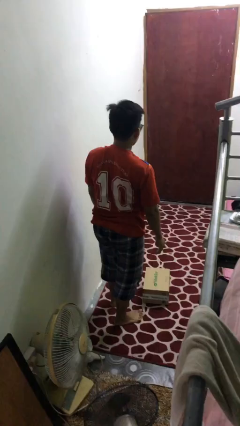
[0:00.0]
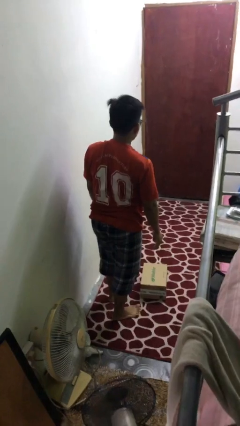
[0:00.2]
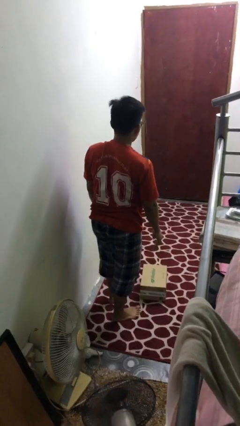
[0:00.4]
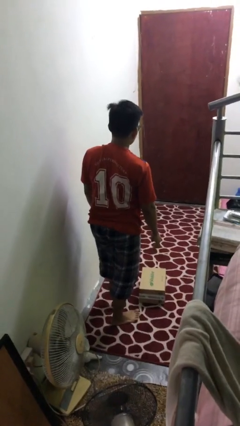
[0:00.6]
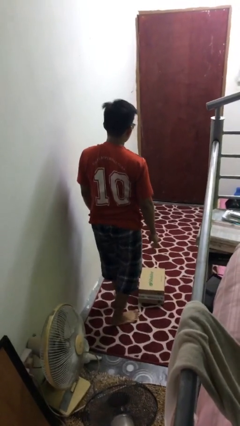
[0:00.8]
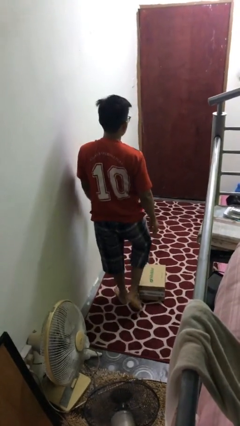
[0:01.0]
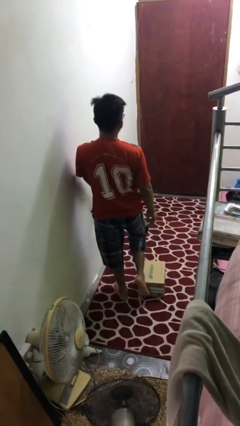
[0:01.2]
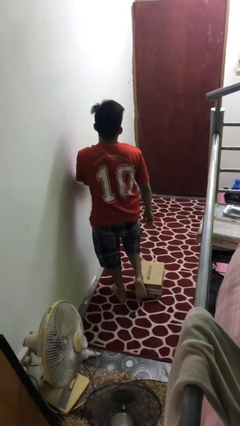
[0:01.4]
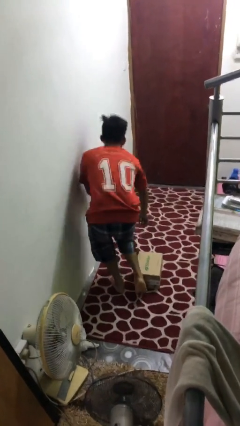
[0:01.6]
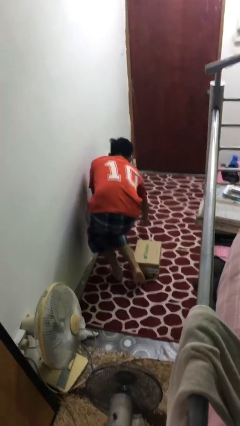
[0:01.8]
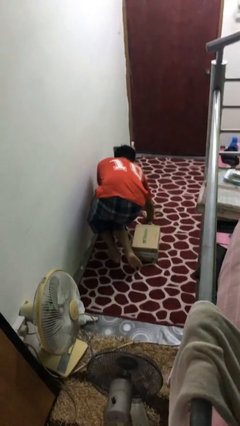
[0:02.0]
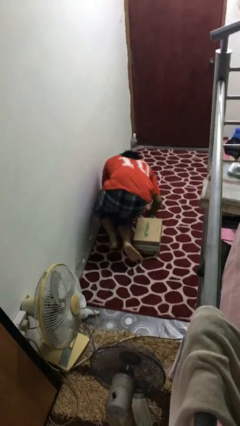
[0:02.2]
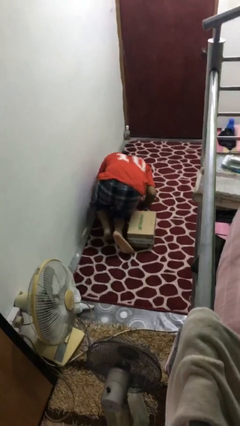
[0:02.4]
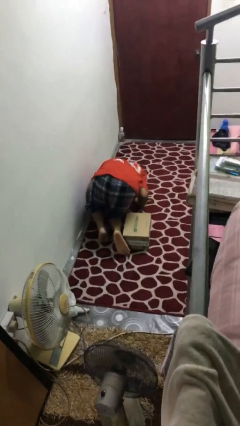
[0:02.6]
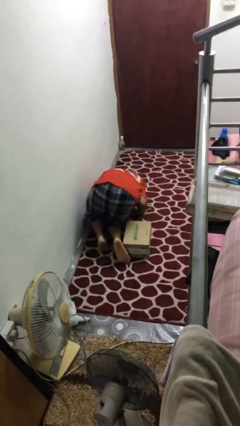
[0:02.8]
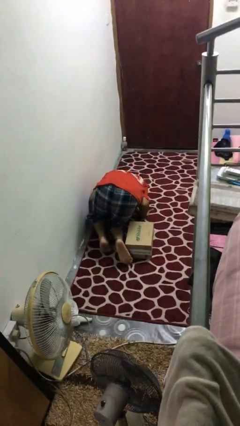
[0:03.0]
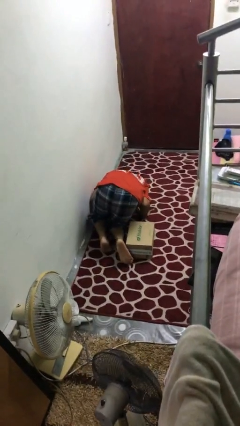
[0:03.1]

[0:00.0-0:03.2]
person trips on object on floor

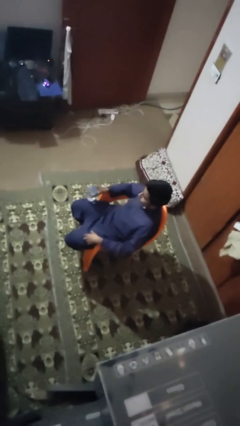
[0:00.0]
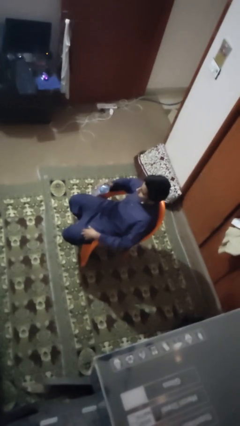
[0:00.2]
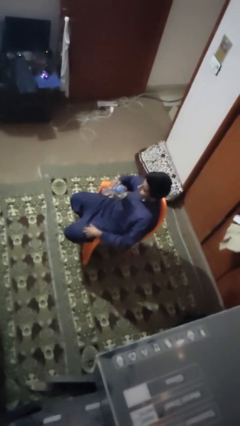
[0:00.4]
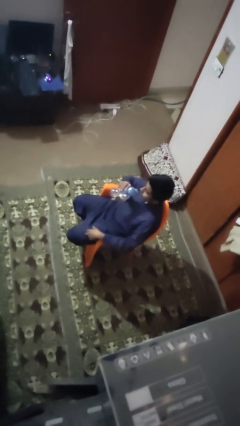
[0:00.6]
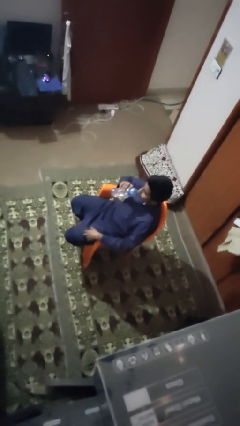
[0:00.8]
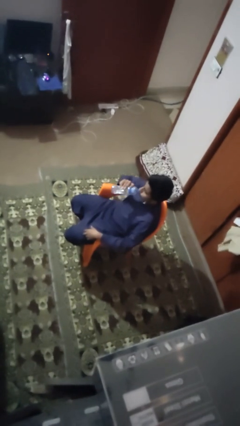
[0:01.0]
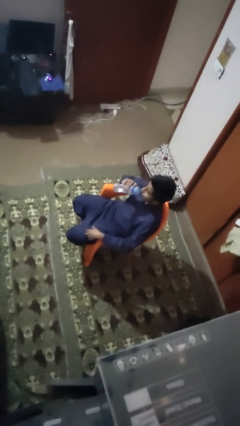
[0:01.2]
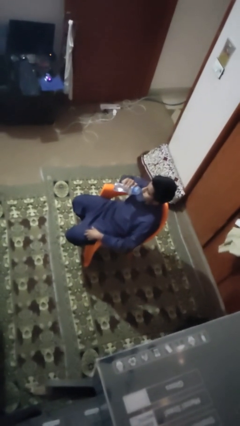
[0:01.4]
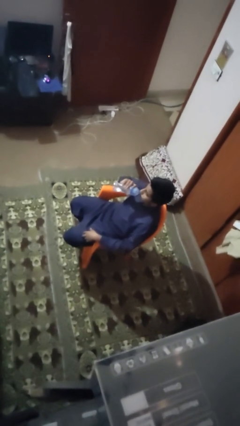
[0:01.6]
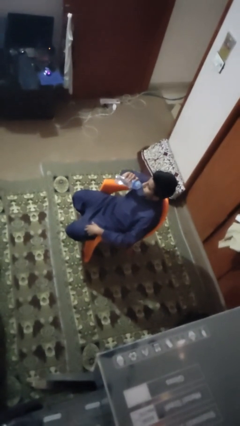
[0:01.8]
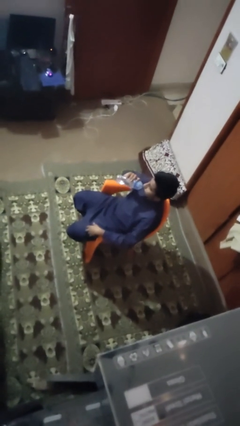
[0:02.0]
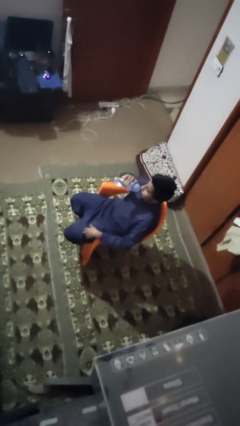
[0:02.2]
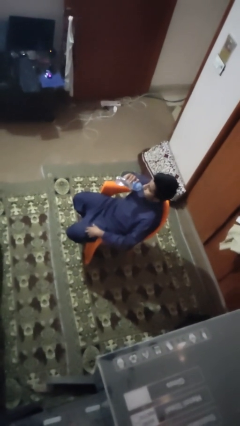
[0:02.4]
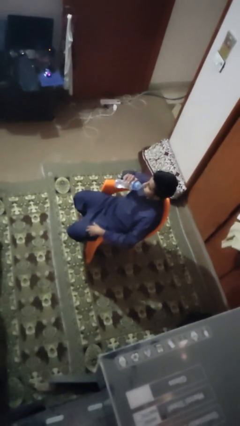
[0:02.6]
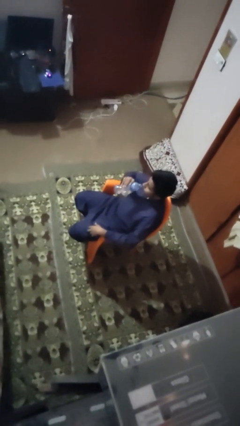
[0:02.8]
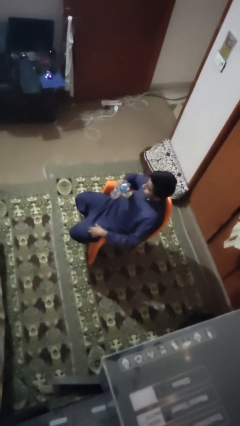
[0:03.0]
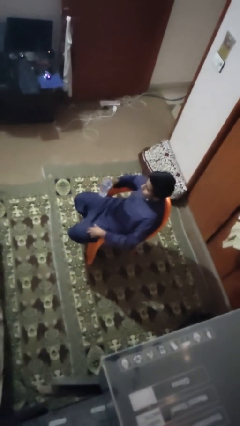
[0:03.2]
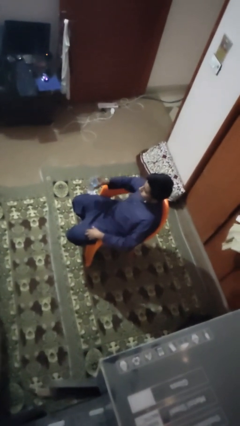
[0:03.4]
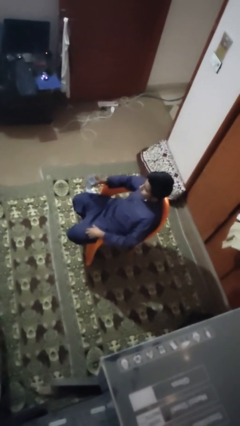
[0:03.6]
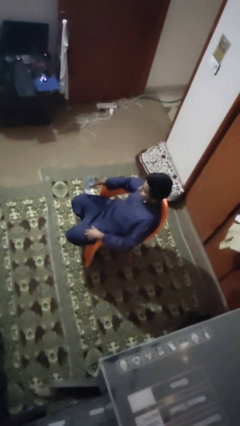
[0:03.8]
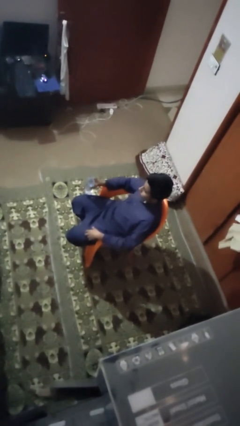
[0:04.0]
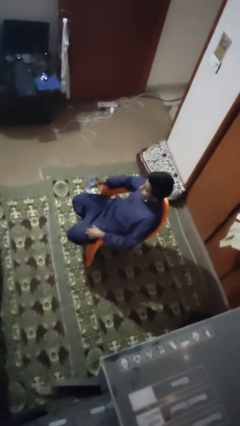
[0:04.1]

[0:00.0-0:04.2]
person drinks from bottle

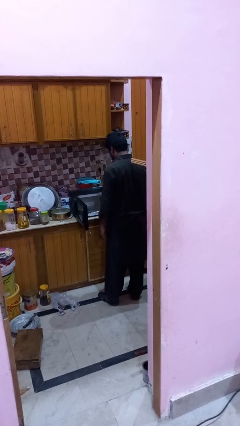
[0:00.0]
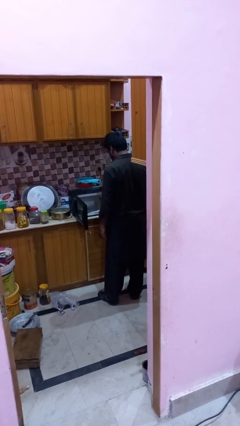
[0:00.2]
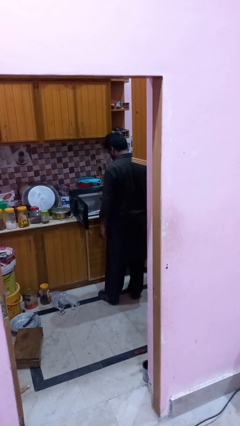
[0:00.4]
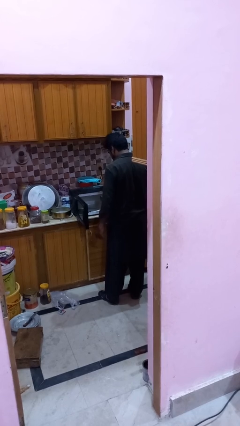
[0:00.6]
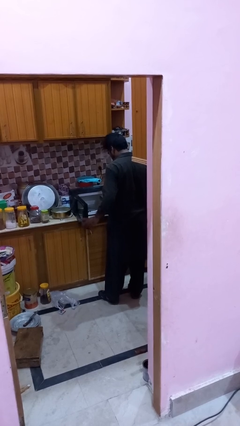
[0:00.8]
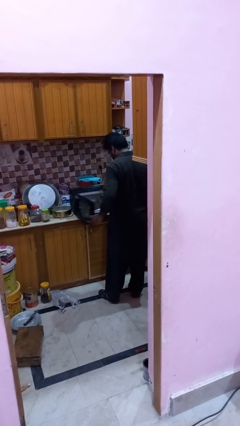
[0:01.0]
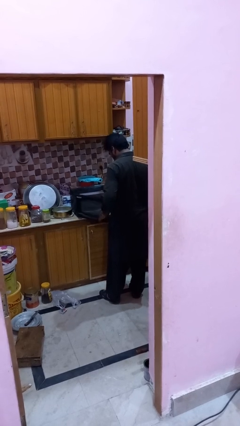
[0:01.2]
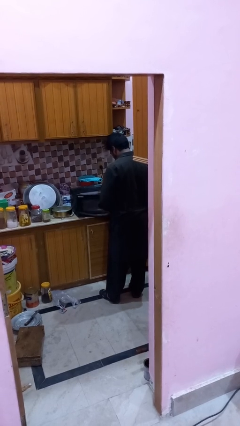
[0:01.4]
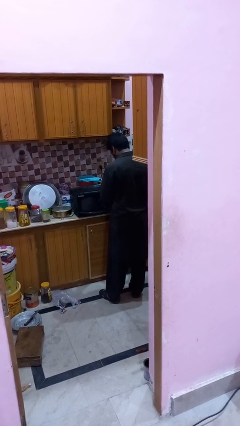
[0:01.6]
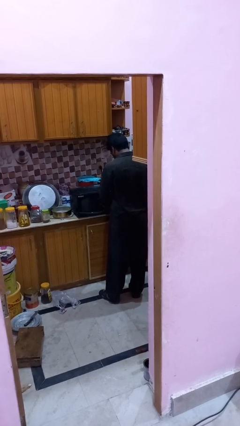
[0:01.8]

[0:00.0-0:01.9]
person closes oven door

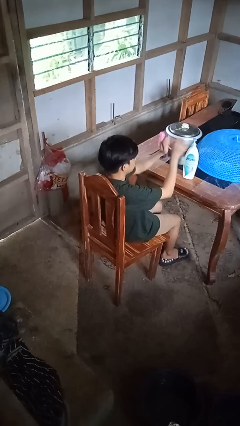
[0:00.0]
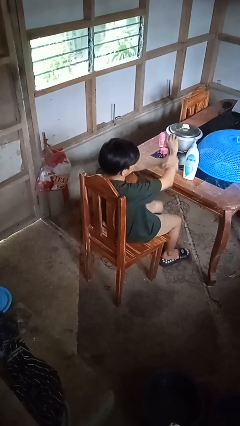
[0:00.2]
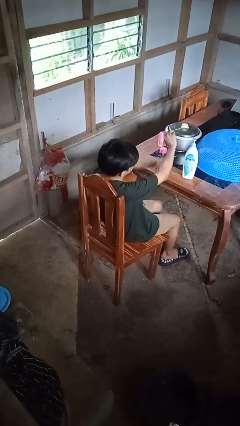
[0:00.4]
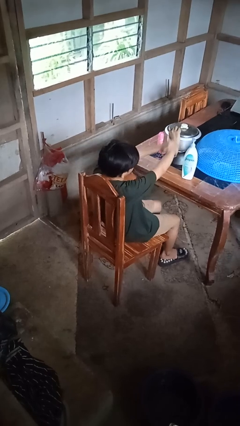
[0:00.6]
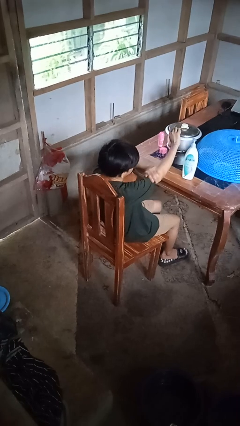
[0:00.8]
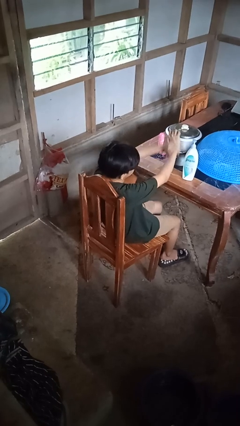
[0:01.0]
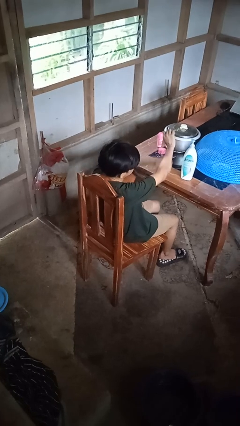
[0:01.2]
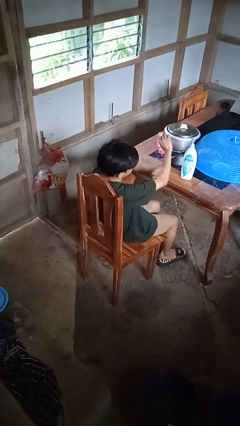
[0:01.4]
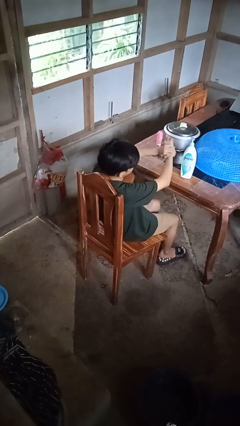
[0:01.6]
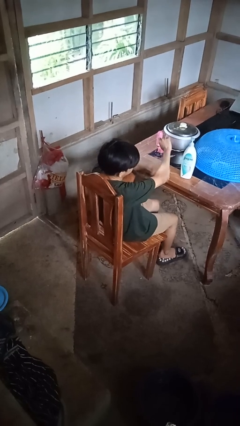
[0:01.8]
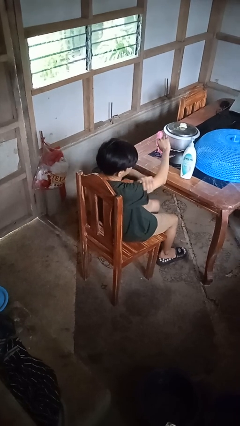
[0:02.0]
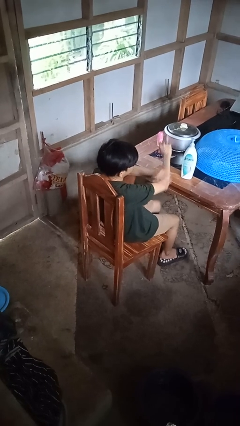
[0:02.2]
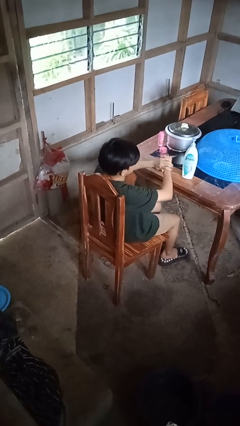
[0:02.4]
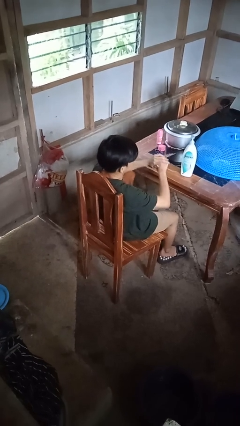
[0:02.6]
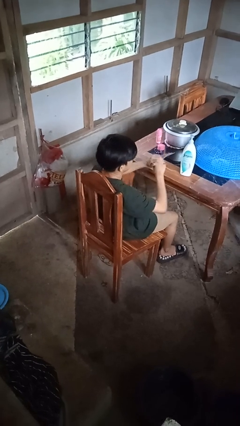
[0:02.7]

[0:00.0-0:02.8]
person applies sunscreen

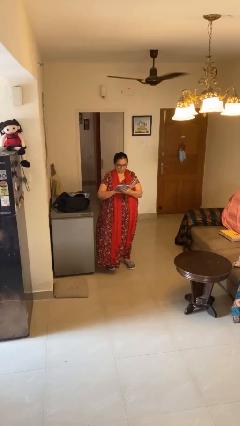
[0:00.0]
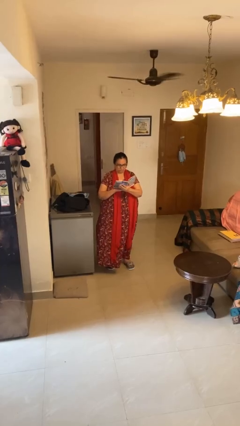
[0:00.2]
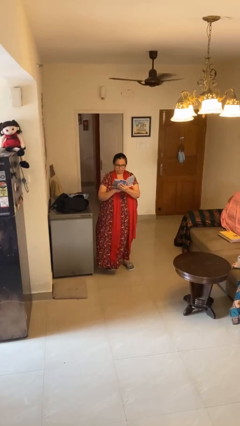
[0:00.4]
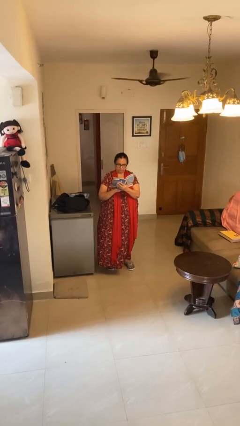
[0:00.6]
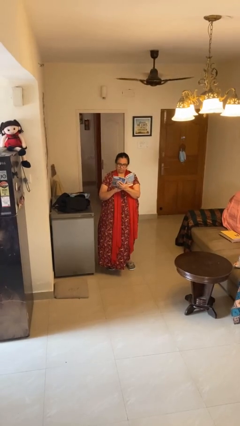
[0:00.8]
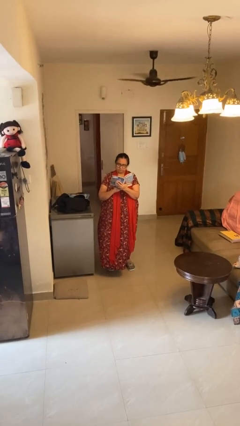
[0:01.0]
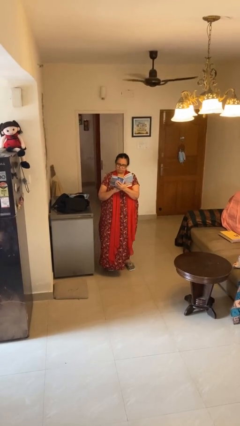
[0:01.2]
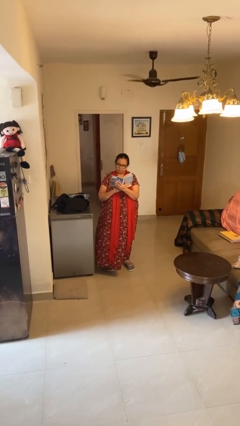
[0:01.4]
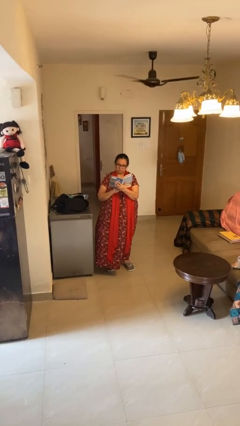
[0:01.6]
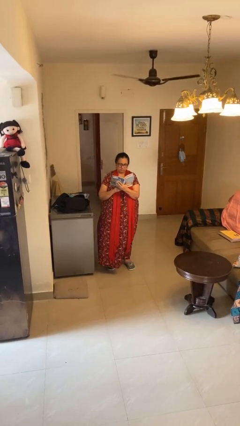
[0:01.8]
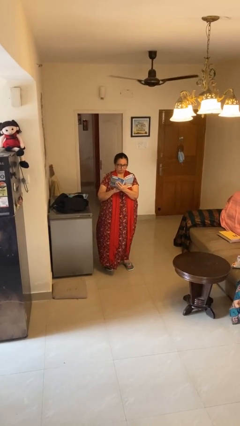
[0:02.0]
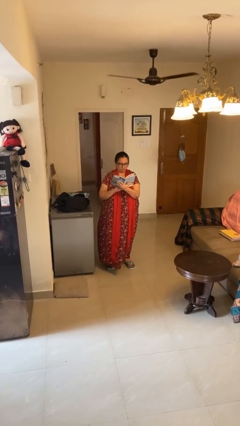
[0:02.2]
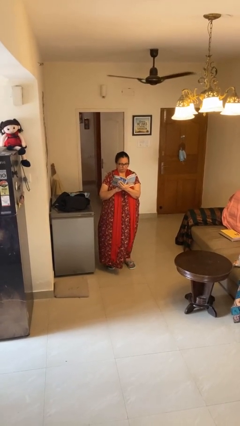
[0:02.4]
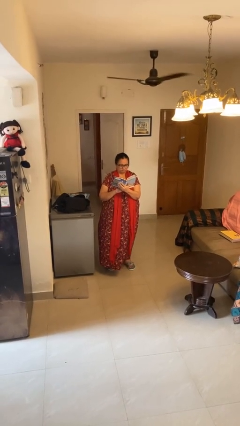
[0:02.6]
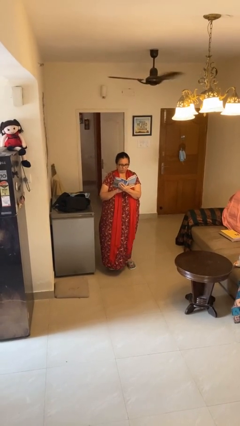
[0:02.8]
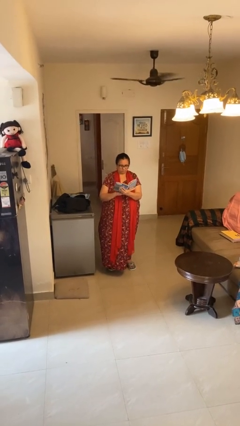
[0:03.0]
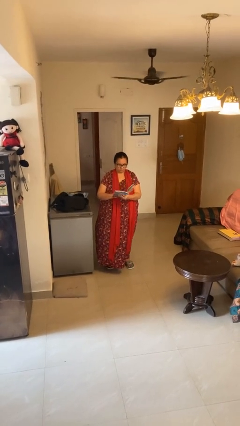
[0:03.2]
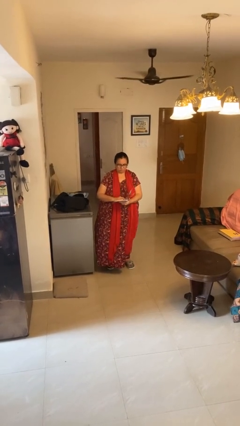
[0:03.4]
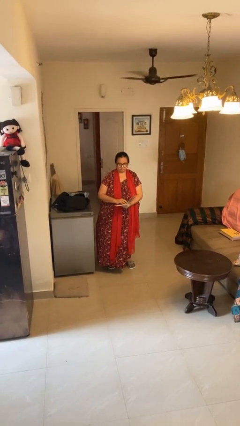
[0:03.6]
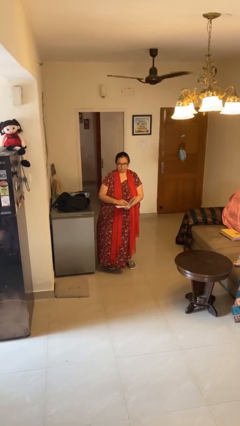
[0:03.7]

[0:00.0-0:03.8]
person reads document

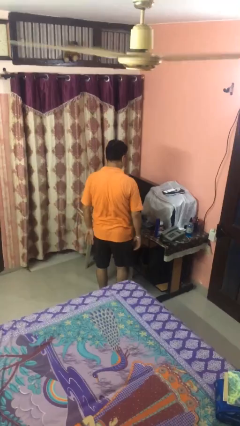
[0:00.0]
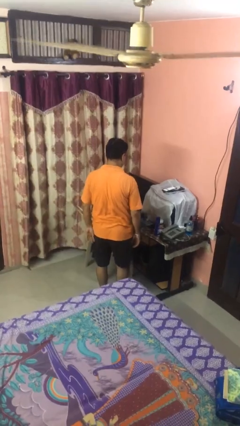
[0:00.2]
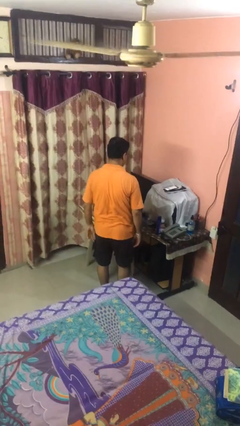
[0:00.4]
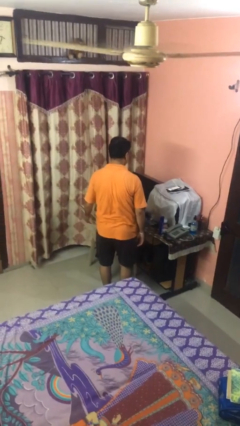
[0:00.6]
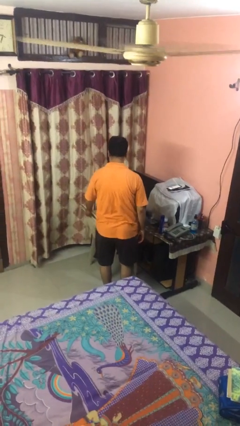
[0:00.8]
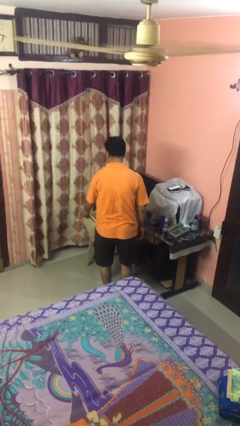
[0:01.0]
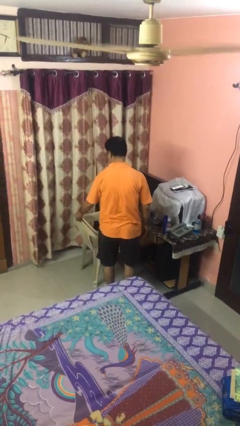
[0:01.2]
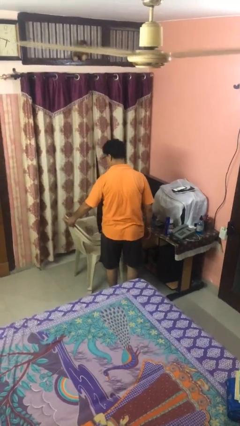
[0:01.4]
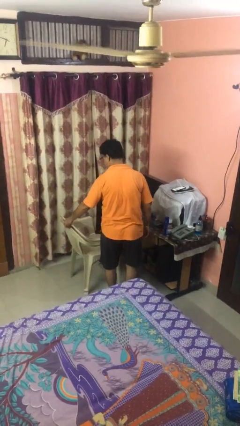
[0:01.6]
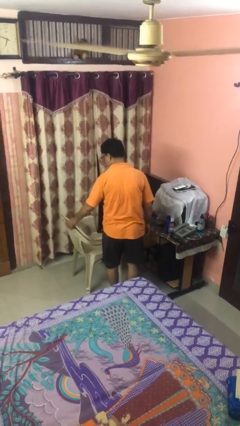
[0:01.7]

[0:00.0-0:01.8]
person pulls out chair

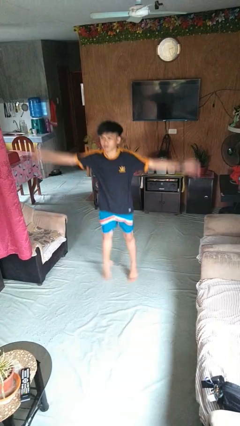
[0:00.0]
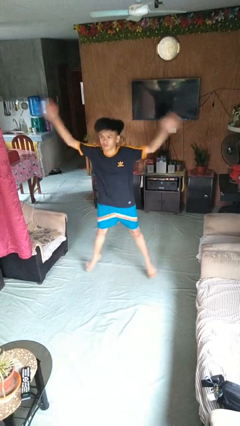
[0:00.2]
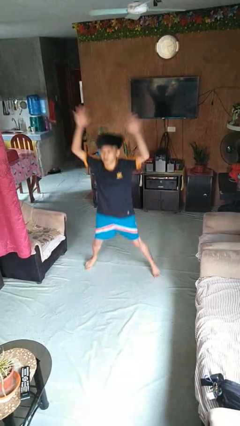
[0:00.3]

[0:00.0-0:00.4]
person exercises with jumping jacks
